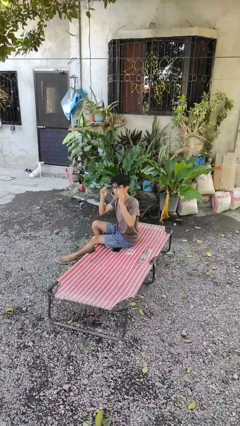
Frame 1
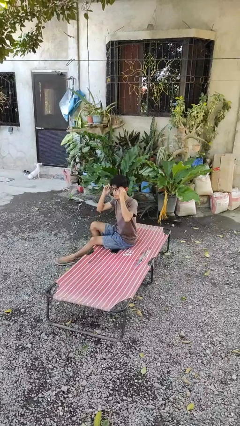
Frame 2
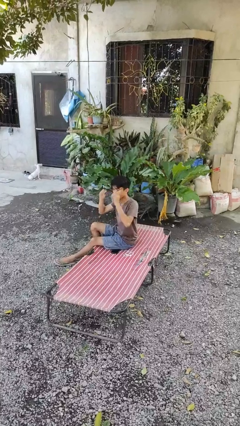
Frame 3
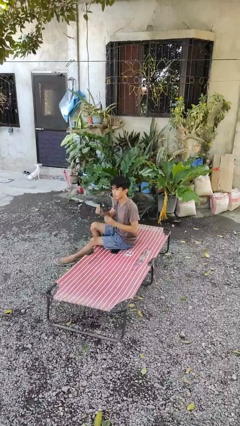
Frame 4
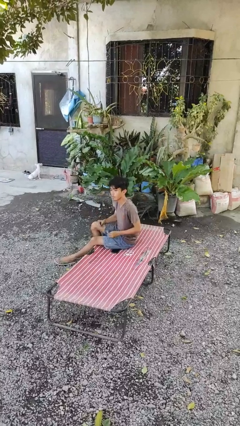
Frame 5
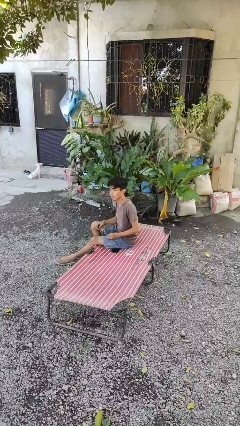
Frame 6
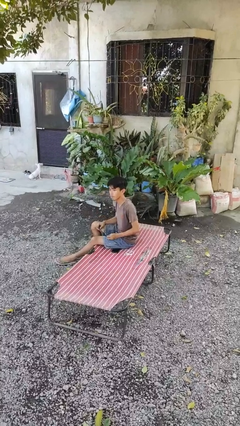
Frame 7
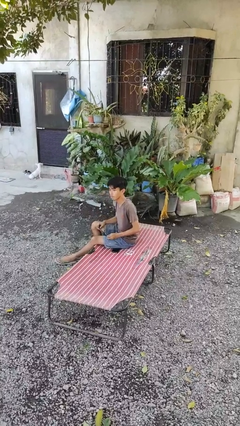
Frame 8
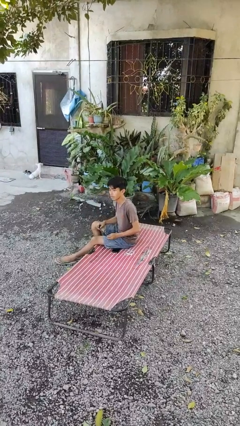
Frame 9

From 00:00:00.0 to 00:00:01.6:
person takes off glasses

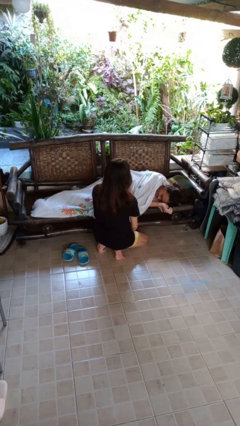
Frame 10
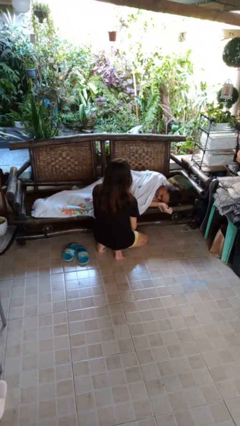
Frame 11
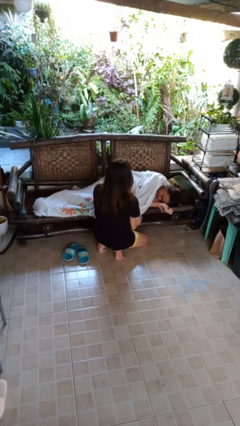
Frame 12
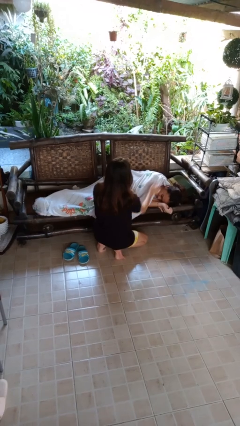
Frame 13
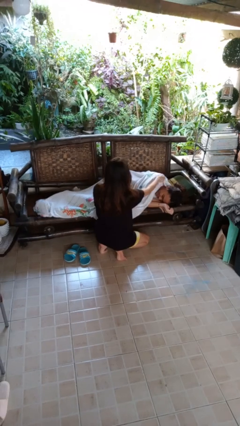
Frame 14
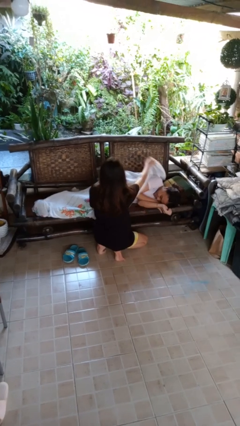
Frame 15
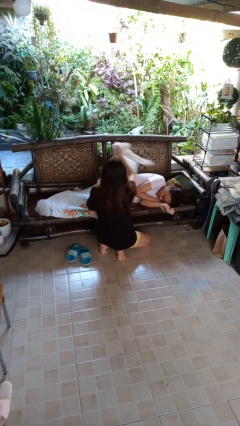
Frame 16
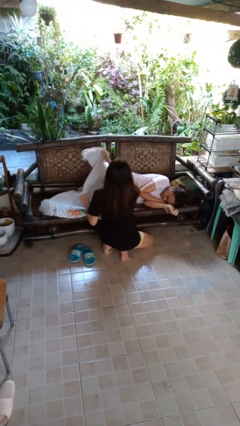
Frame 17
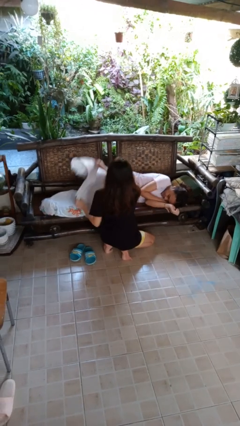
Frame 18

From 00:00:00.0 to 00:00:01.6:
person uncovers friend with blanket

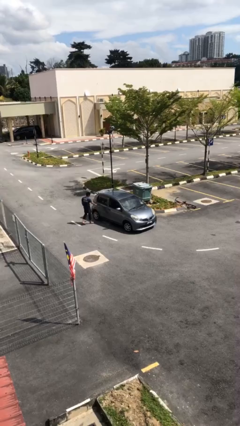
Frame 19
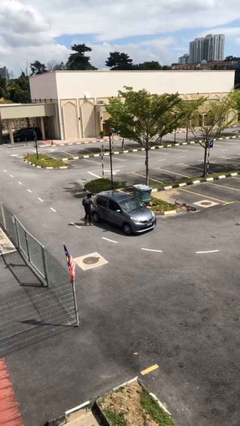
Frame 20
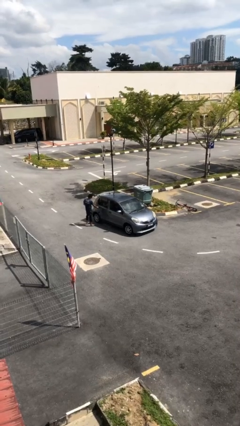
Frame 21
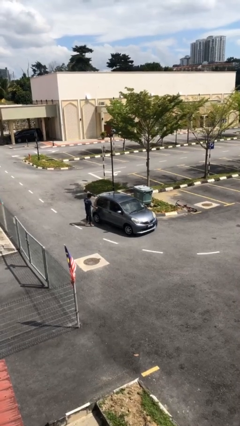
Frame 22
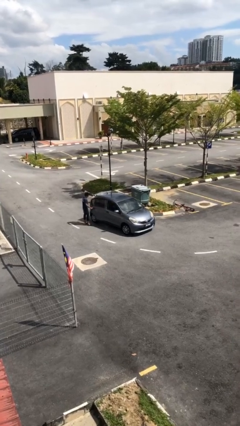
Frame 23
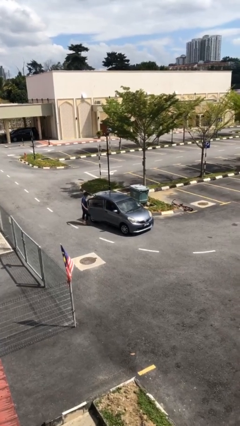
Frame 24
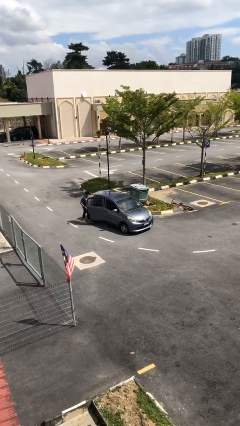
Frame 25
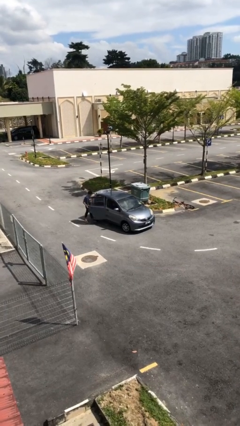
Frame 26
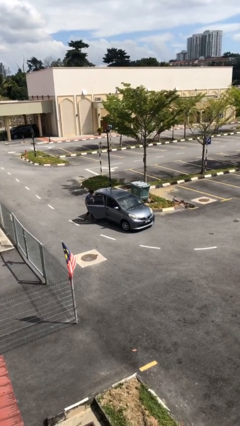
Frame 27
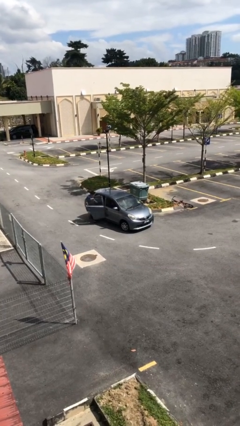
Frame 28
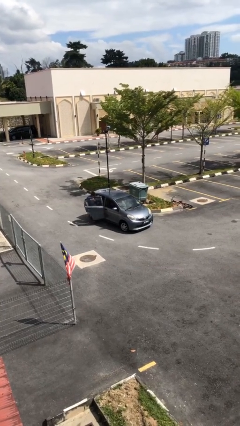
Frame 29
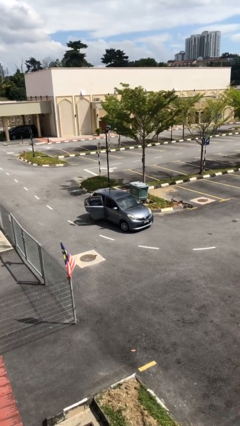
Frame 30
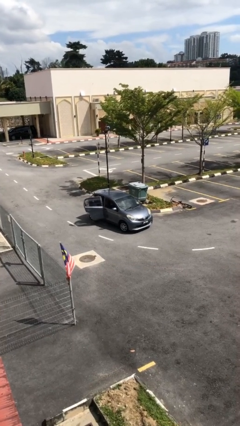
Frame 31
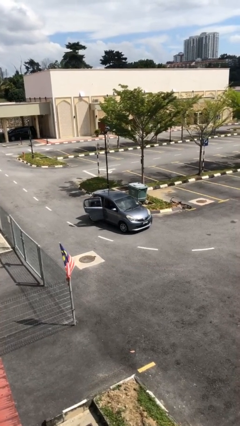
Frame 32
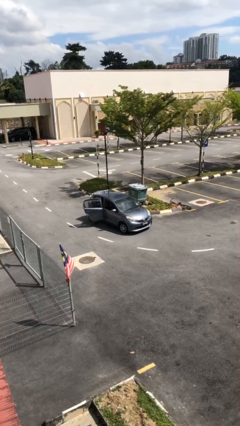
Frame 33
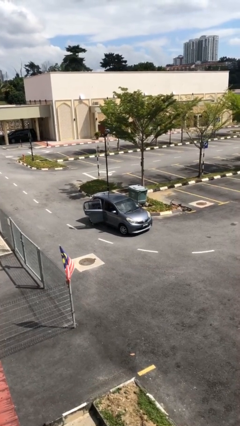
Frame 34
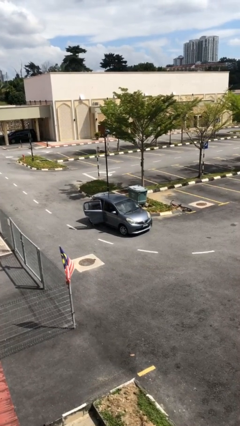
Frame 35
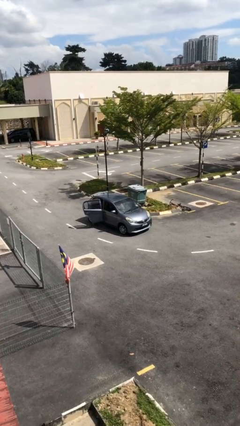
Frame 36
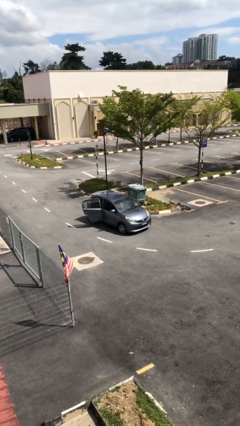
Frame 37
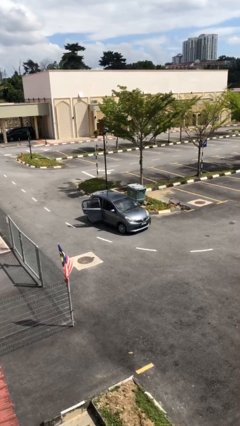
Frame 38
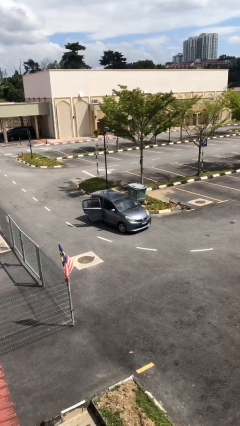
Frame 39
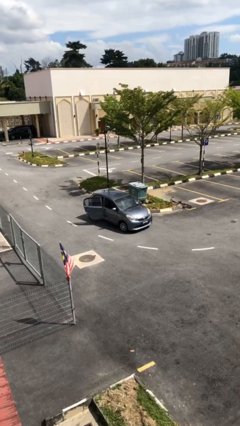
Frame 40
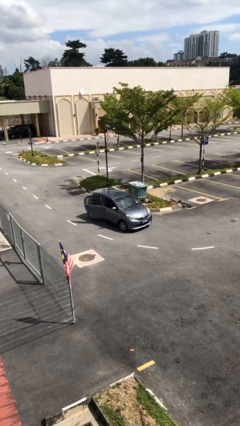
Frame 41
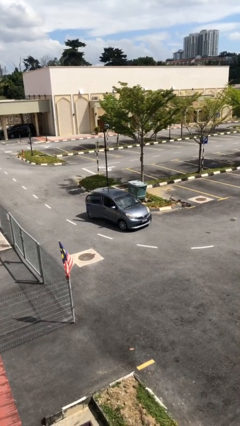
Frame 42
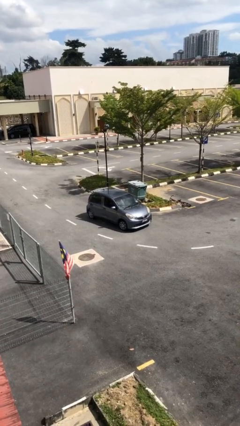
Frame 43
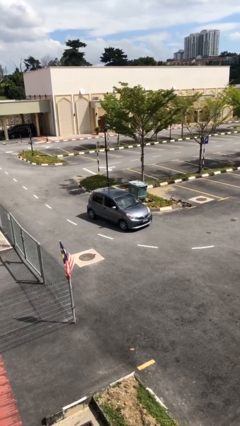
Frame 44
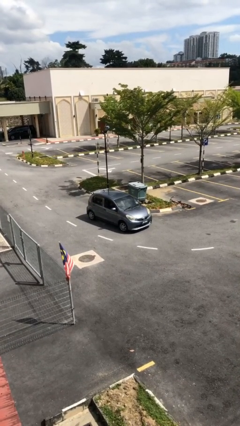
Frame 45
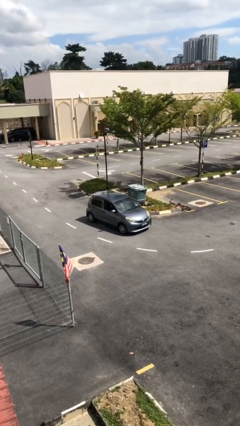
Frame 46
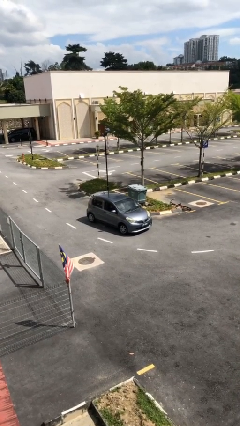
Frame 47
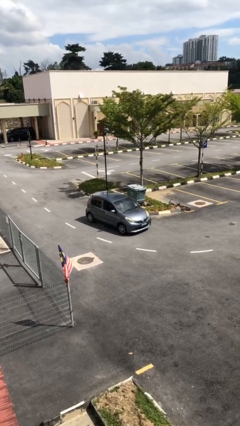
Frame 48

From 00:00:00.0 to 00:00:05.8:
car picks up person

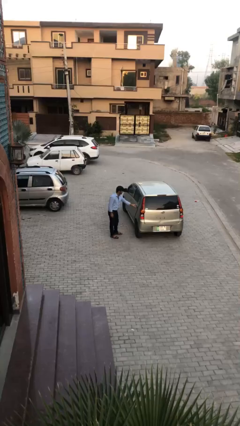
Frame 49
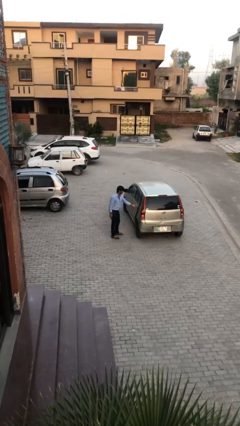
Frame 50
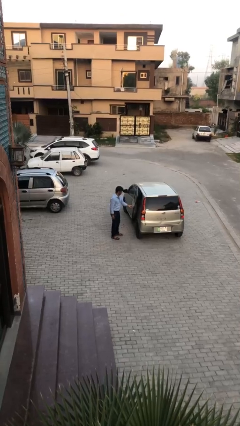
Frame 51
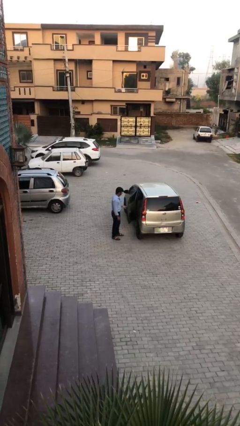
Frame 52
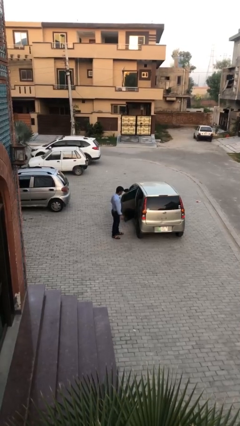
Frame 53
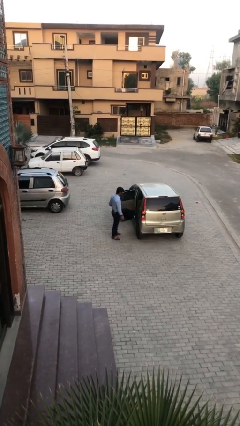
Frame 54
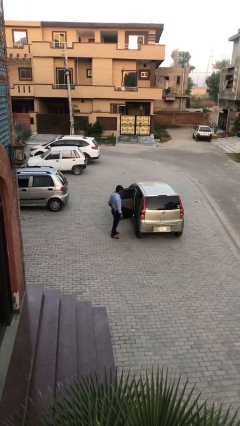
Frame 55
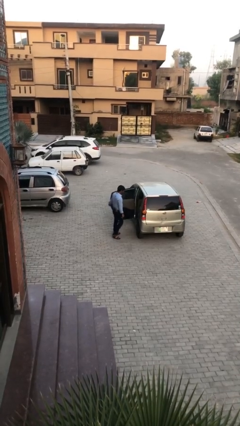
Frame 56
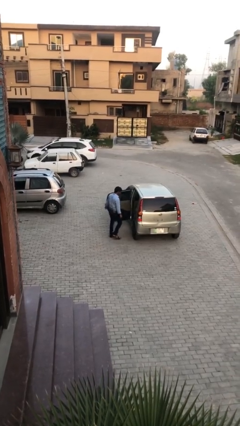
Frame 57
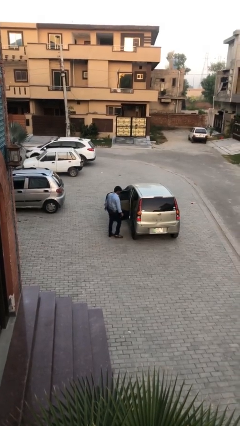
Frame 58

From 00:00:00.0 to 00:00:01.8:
person opens car door

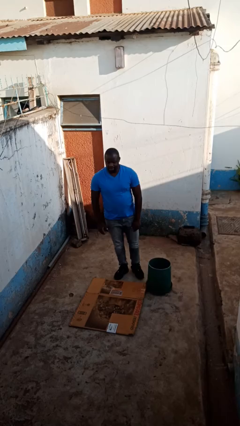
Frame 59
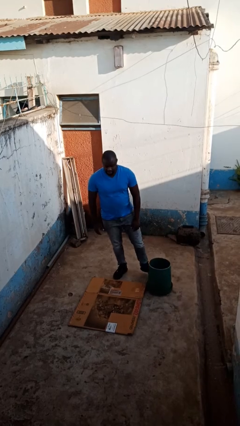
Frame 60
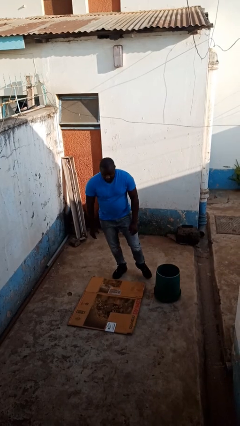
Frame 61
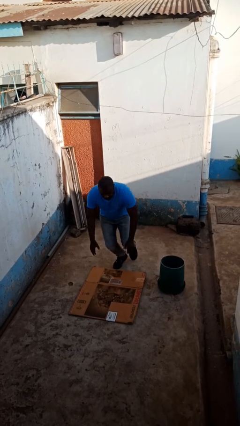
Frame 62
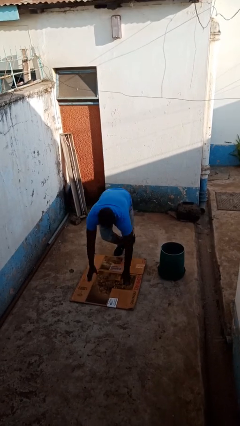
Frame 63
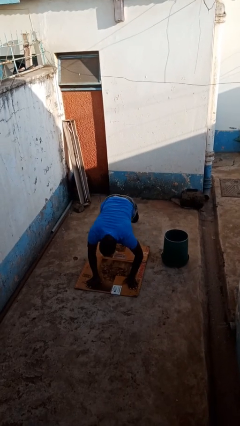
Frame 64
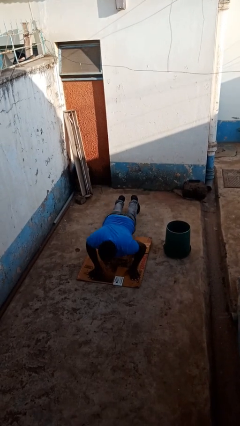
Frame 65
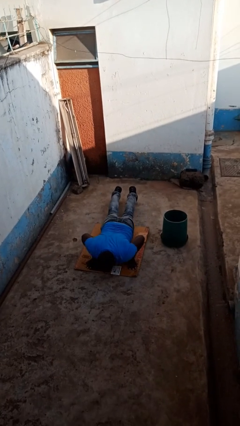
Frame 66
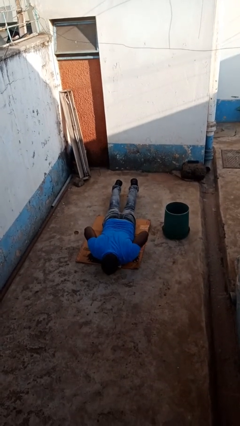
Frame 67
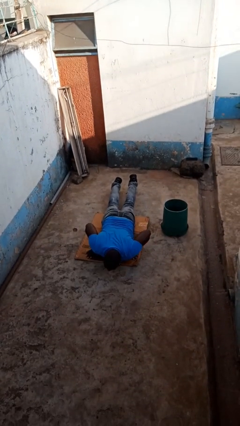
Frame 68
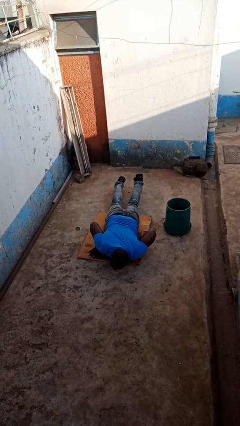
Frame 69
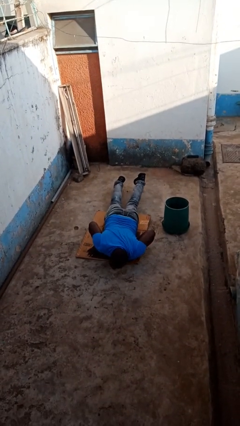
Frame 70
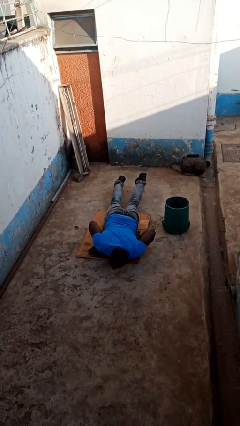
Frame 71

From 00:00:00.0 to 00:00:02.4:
person trips on object on floor

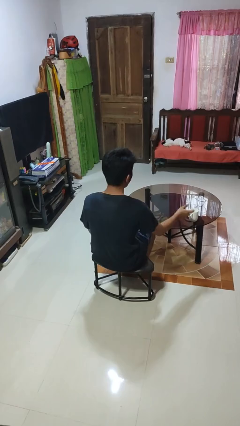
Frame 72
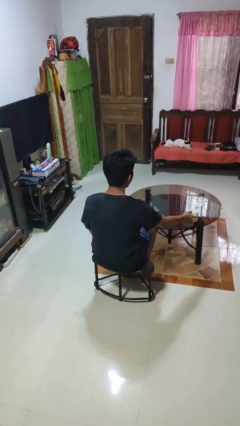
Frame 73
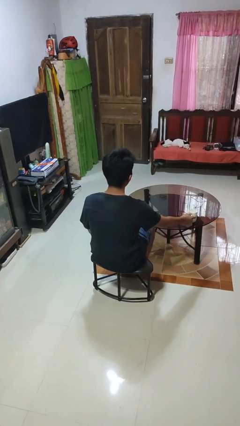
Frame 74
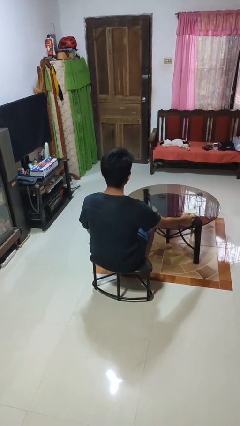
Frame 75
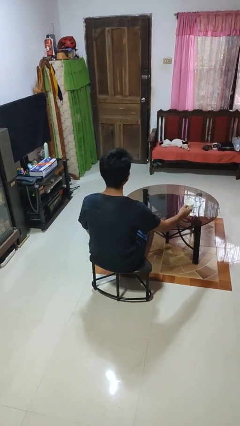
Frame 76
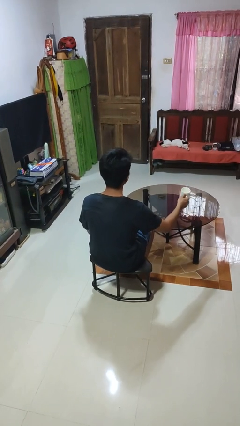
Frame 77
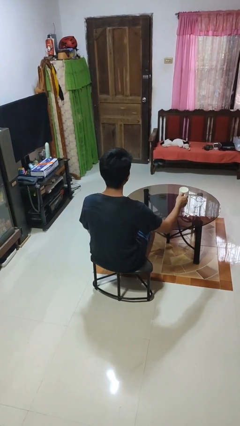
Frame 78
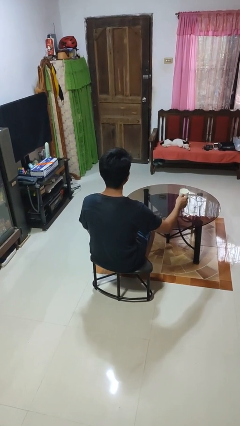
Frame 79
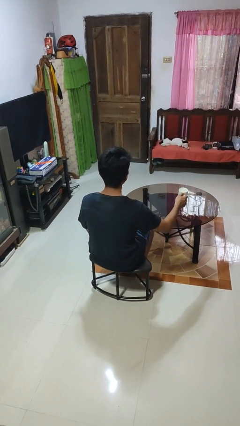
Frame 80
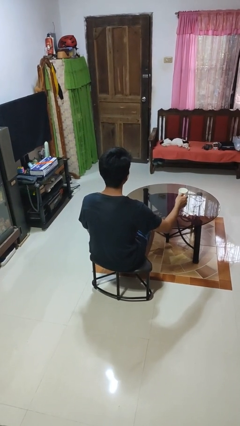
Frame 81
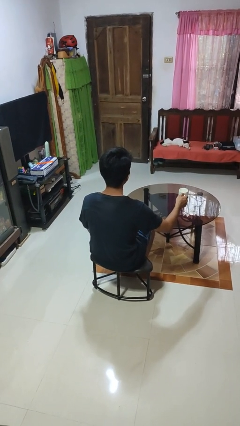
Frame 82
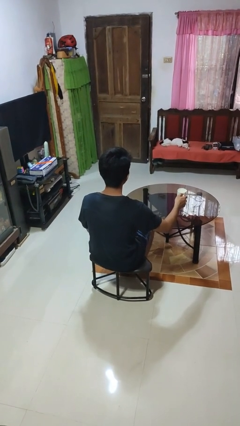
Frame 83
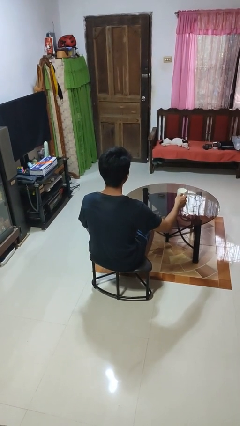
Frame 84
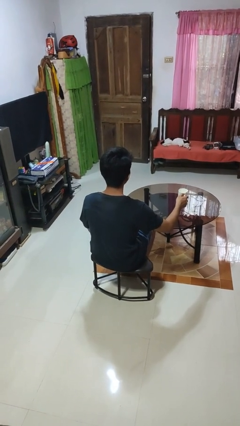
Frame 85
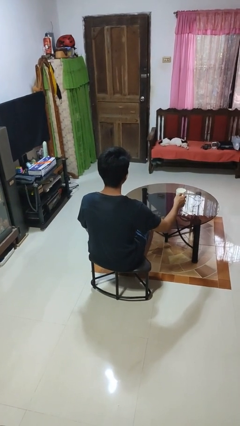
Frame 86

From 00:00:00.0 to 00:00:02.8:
person picks up object from table

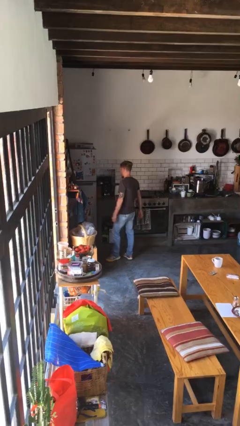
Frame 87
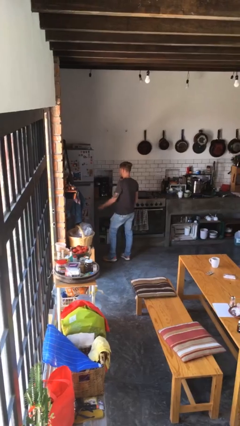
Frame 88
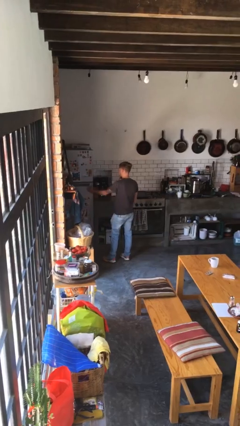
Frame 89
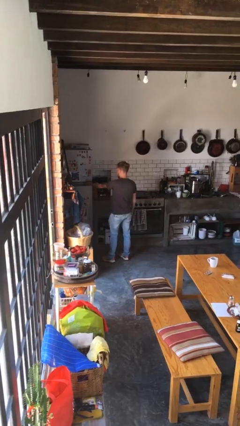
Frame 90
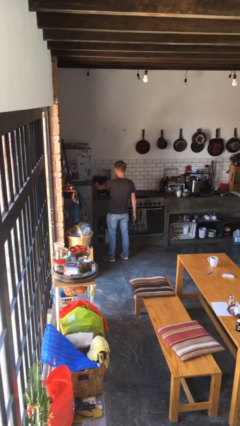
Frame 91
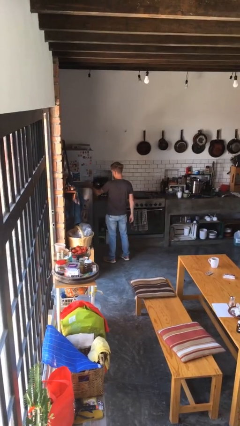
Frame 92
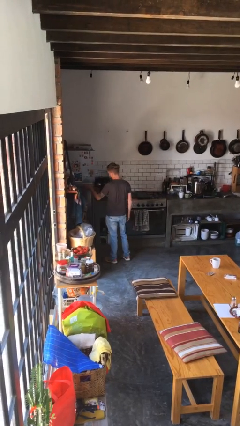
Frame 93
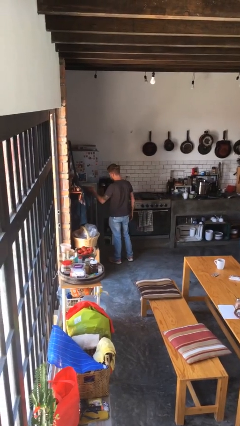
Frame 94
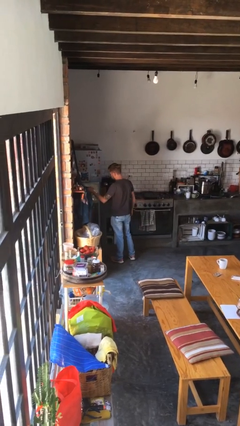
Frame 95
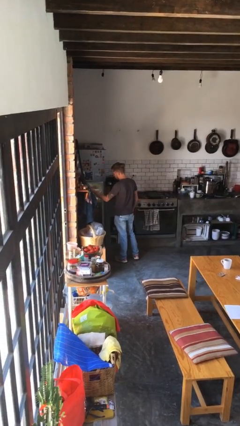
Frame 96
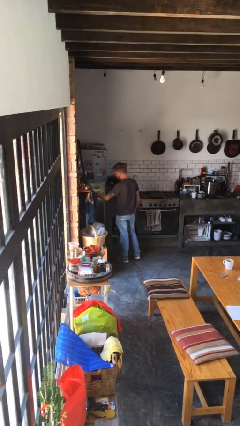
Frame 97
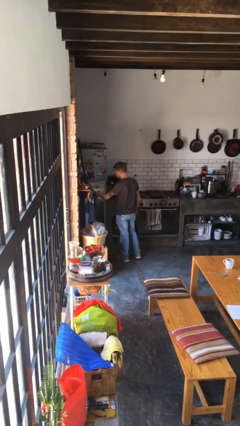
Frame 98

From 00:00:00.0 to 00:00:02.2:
person opens refrigerator
